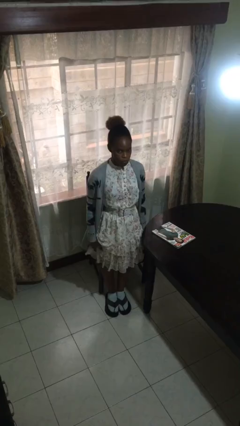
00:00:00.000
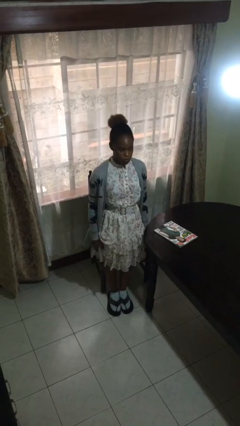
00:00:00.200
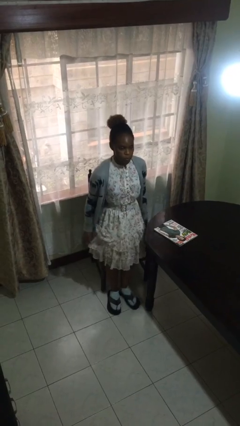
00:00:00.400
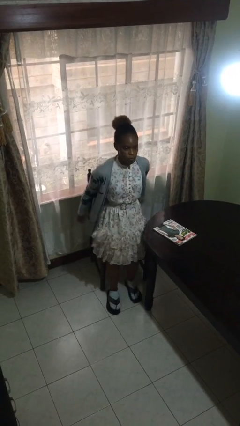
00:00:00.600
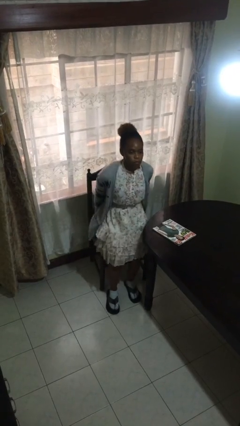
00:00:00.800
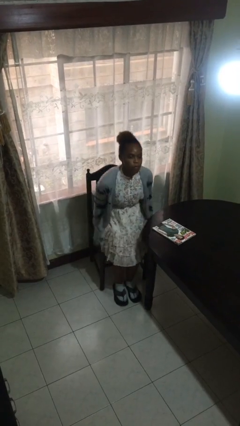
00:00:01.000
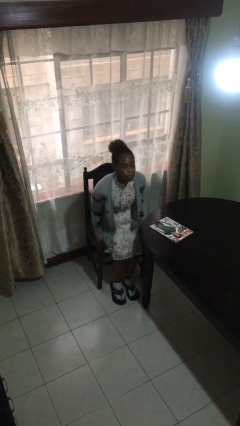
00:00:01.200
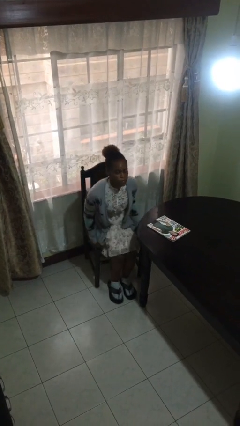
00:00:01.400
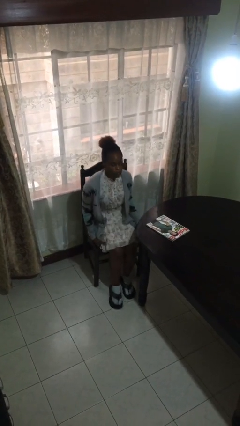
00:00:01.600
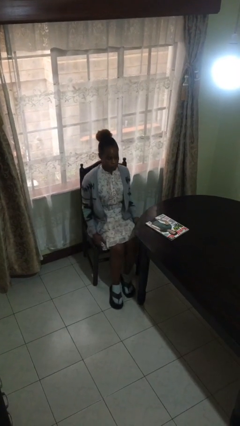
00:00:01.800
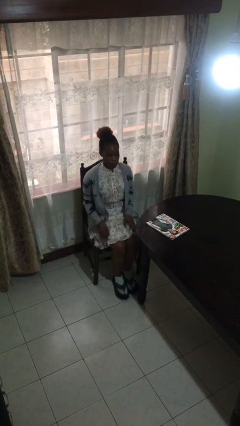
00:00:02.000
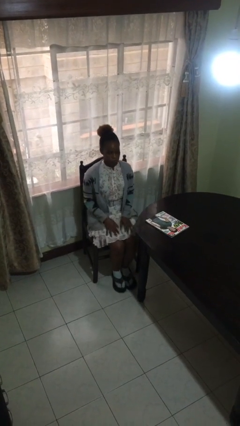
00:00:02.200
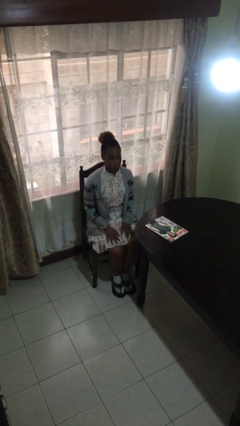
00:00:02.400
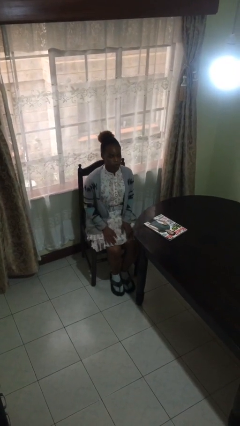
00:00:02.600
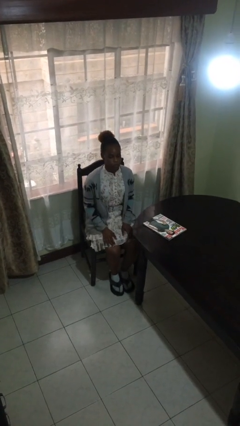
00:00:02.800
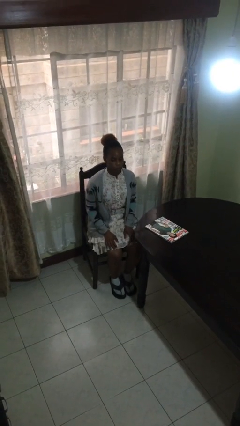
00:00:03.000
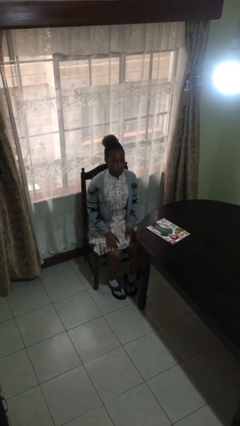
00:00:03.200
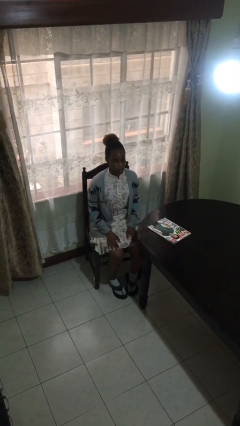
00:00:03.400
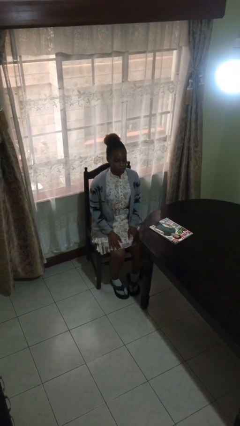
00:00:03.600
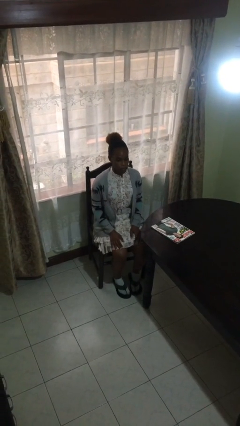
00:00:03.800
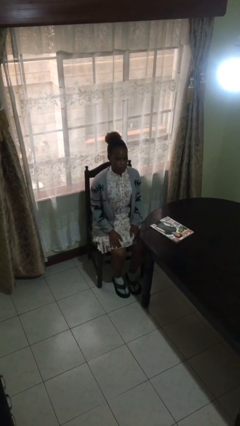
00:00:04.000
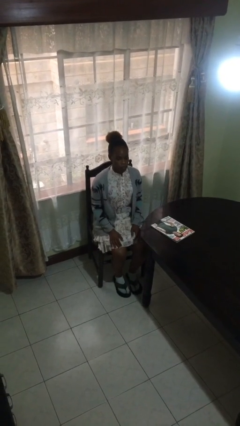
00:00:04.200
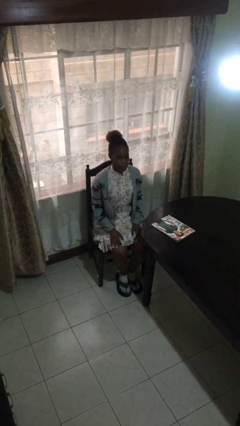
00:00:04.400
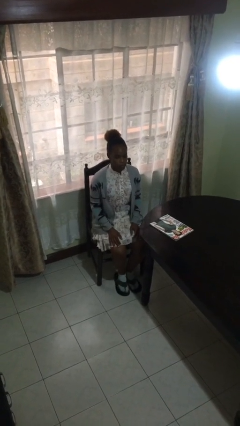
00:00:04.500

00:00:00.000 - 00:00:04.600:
person sits down

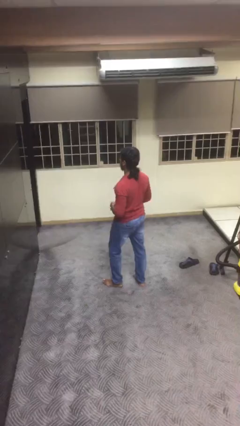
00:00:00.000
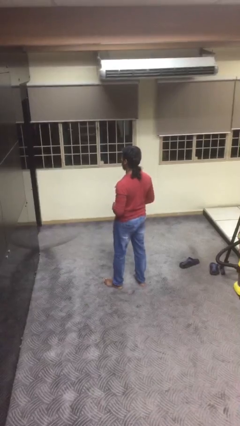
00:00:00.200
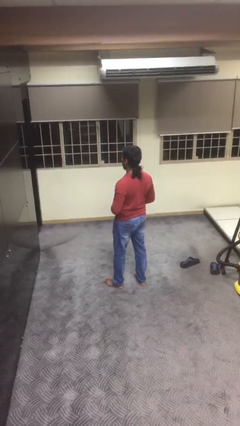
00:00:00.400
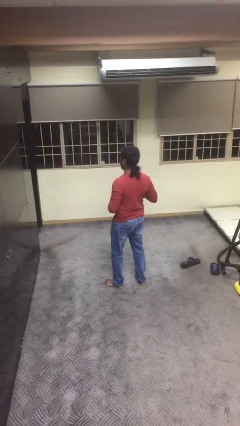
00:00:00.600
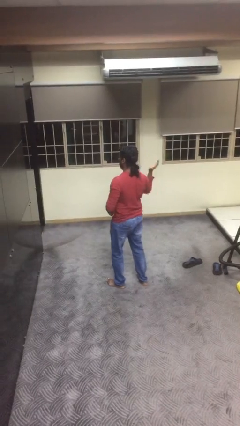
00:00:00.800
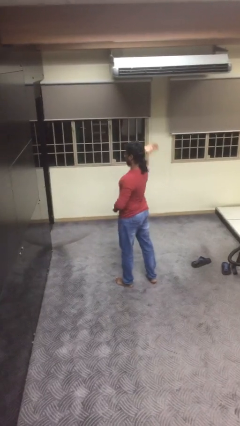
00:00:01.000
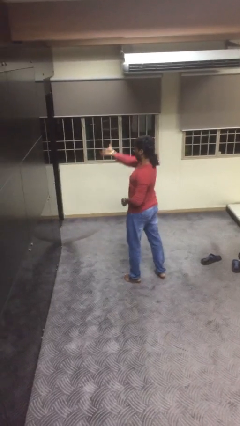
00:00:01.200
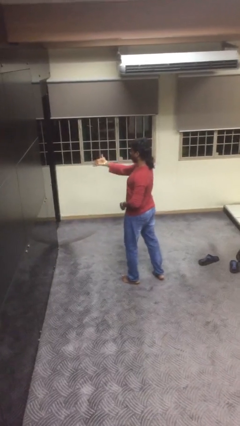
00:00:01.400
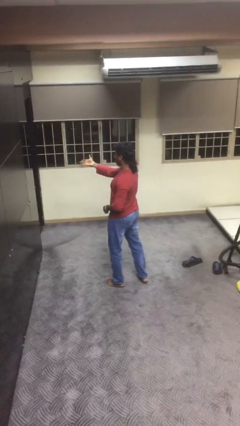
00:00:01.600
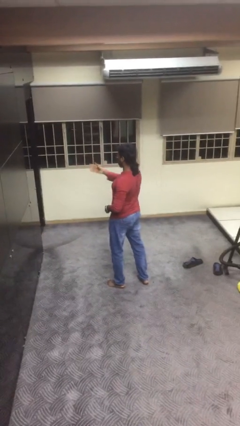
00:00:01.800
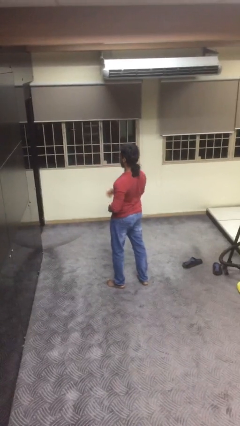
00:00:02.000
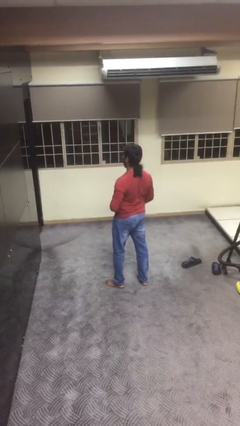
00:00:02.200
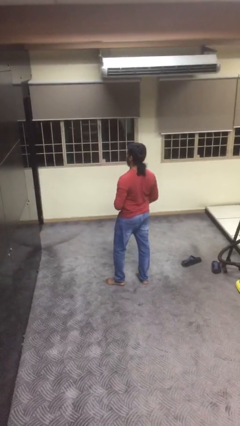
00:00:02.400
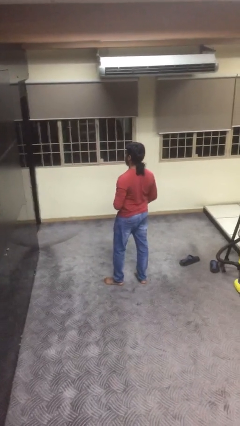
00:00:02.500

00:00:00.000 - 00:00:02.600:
person karate chop

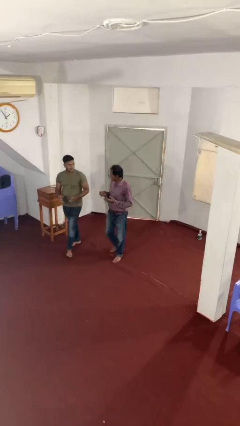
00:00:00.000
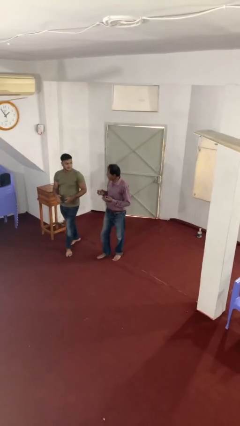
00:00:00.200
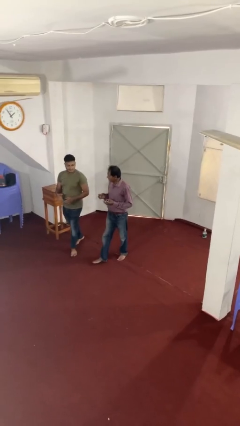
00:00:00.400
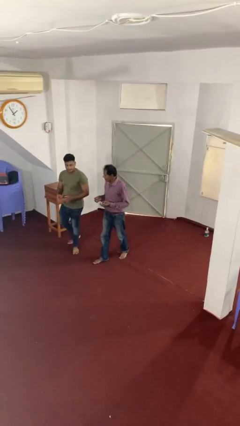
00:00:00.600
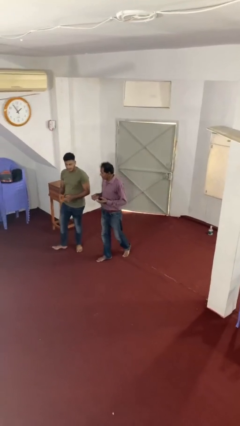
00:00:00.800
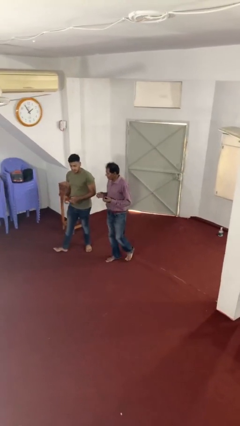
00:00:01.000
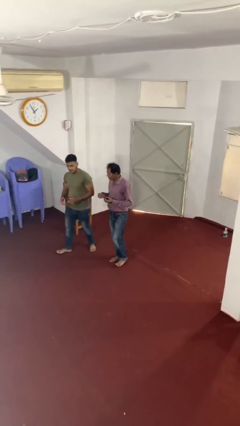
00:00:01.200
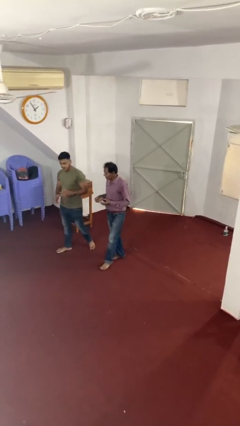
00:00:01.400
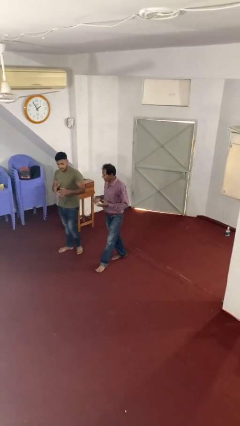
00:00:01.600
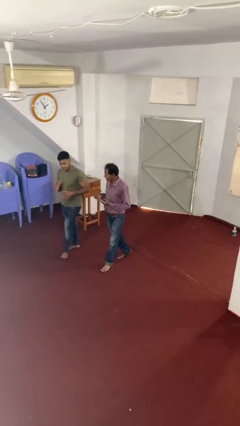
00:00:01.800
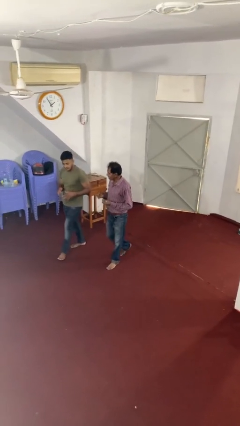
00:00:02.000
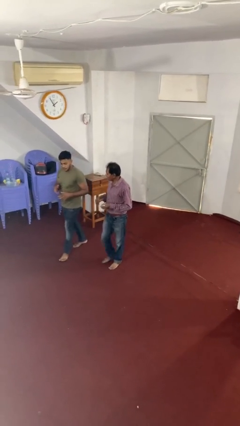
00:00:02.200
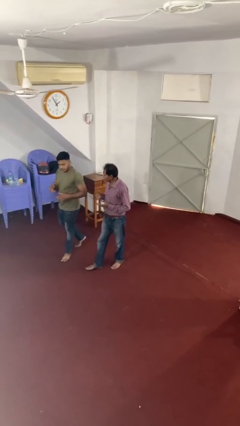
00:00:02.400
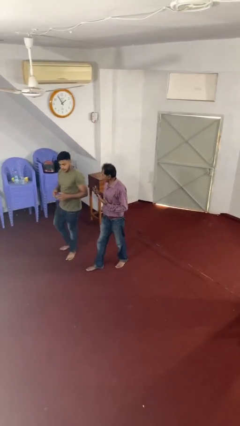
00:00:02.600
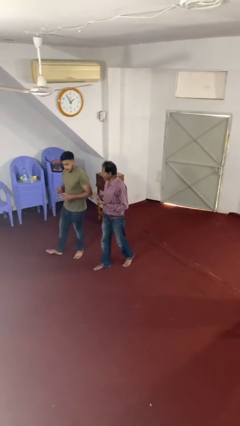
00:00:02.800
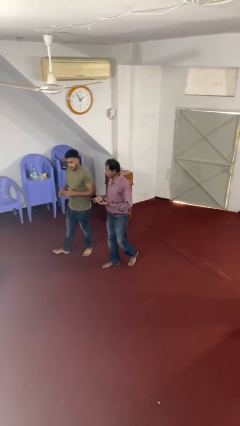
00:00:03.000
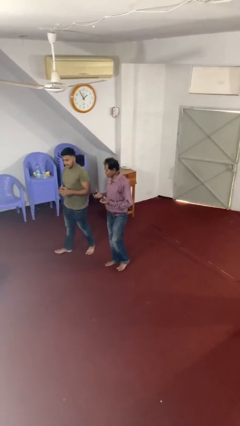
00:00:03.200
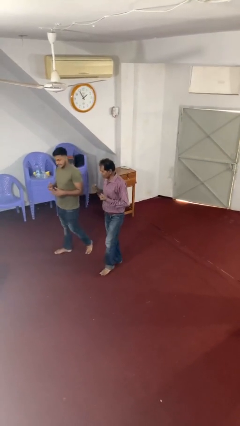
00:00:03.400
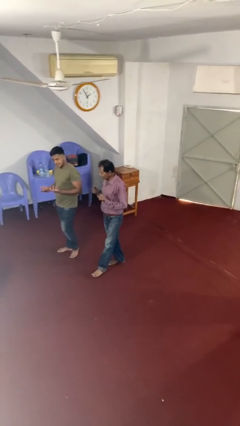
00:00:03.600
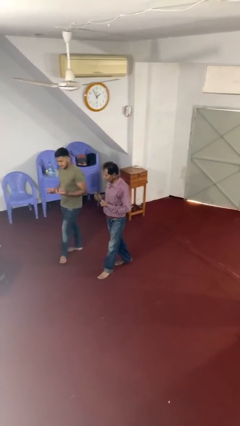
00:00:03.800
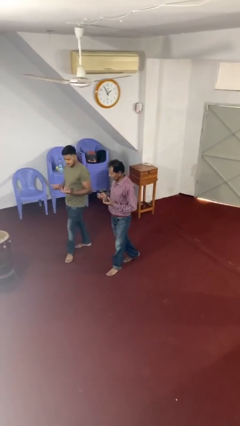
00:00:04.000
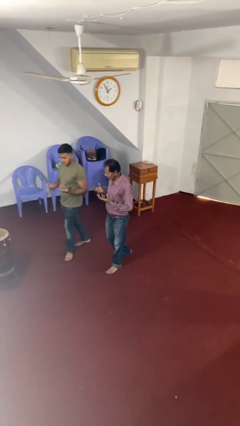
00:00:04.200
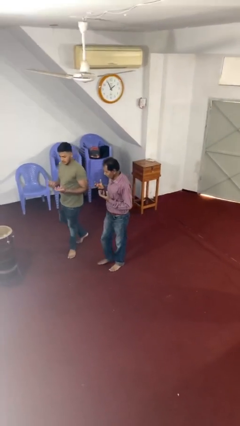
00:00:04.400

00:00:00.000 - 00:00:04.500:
person talks to person

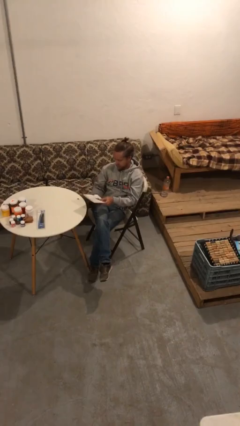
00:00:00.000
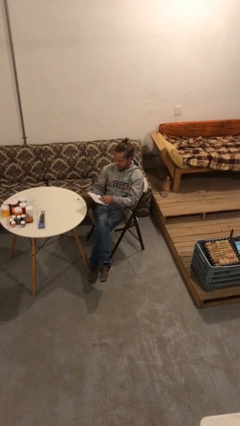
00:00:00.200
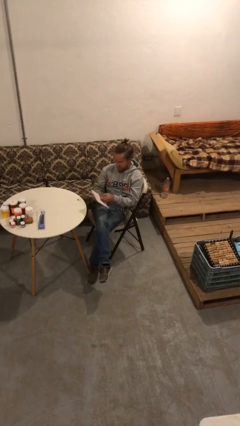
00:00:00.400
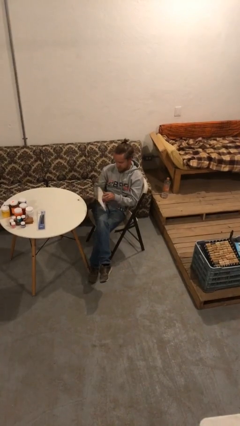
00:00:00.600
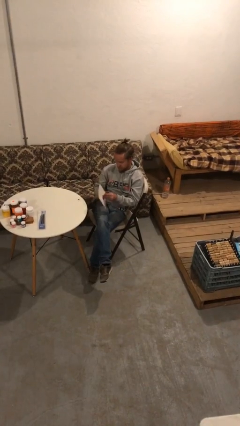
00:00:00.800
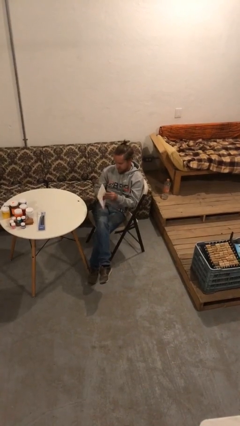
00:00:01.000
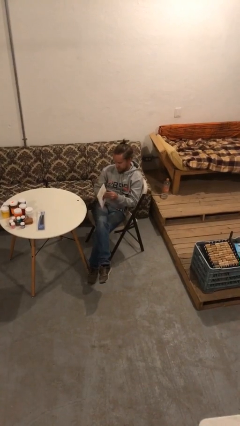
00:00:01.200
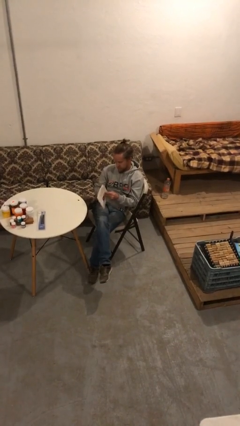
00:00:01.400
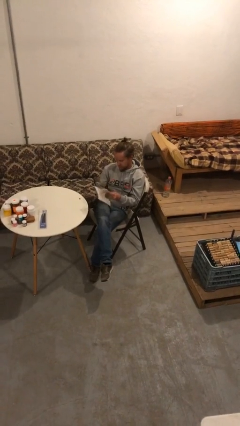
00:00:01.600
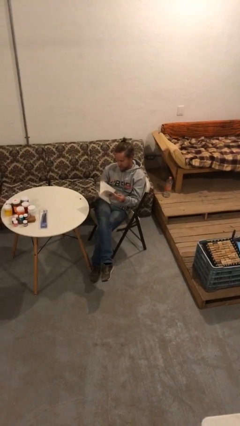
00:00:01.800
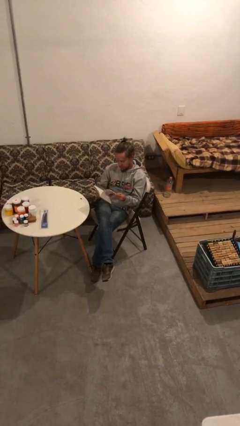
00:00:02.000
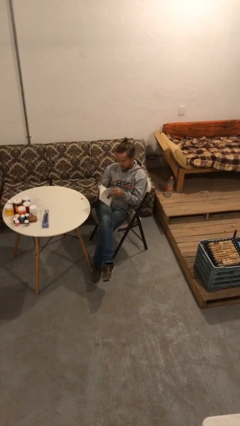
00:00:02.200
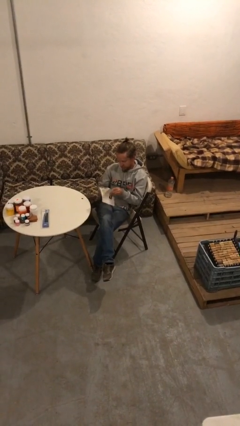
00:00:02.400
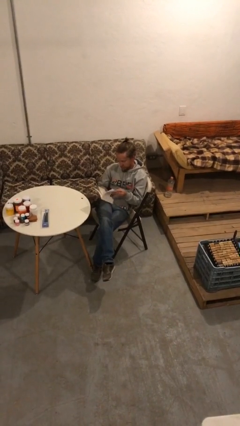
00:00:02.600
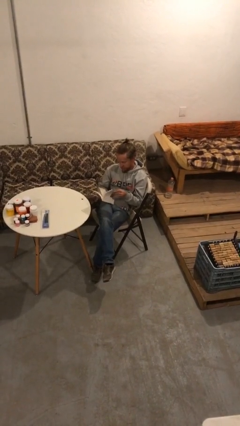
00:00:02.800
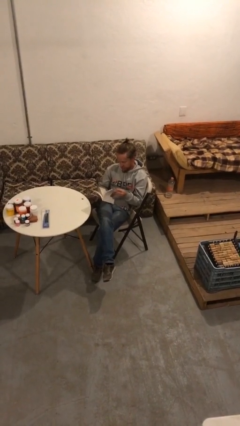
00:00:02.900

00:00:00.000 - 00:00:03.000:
person reads document

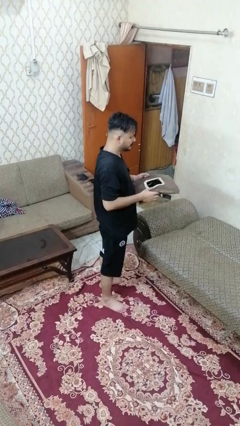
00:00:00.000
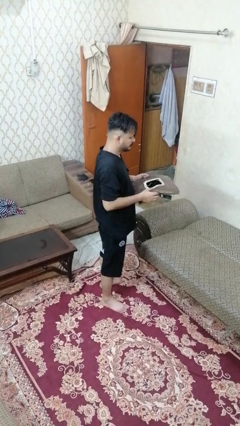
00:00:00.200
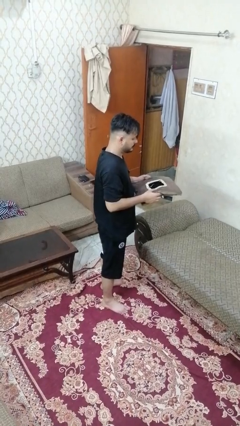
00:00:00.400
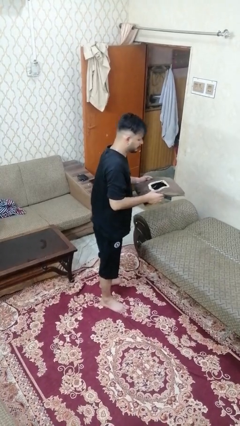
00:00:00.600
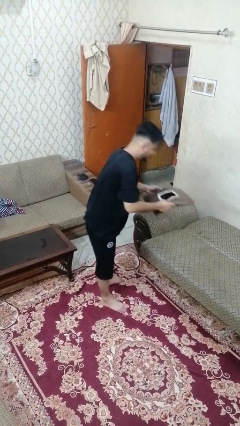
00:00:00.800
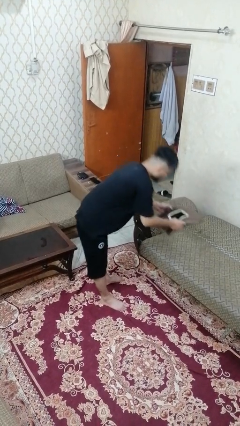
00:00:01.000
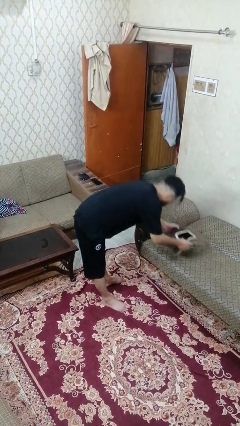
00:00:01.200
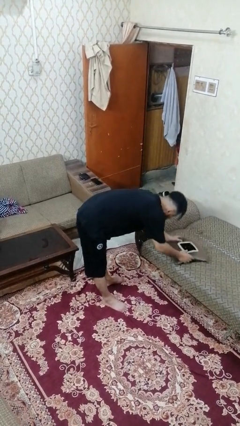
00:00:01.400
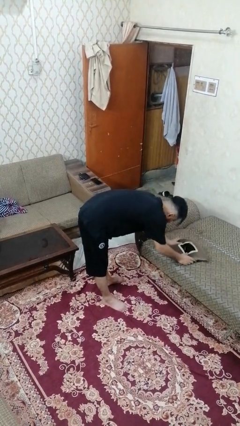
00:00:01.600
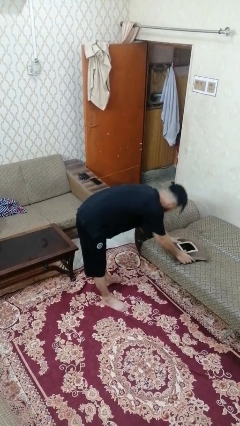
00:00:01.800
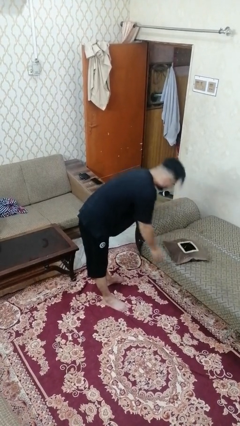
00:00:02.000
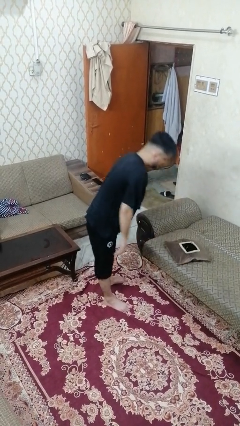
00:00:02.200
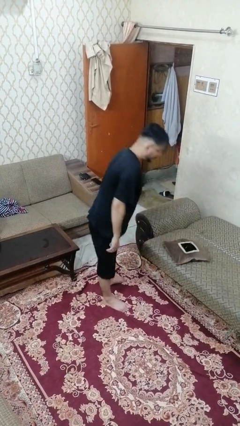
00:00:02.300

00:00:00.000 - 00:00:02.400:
person puts down object on couch

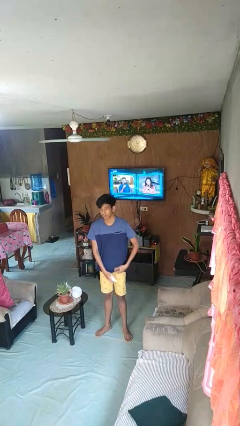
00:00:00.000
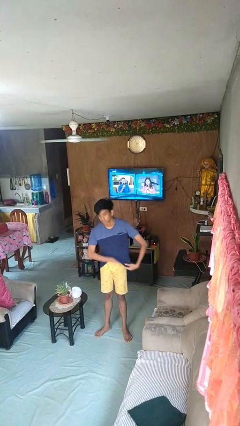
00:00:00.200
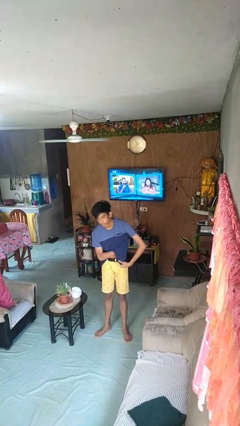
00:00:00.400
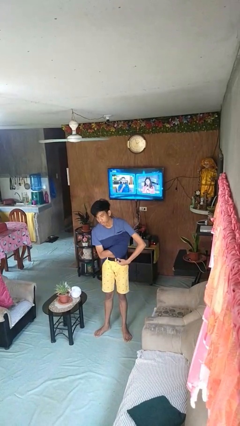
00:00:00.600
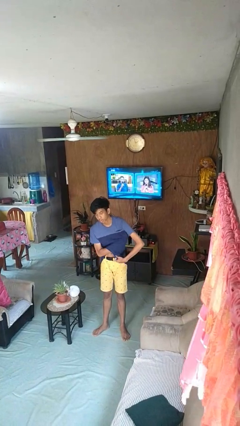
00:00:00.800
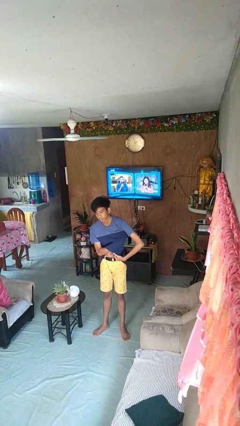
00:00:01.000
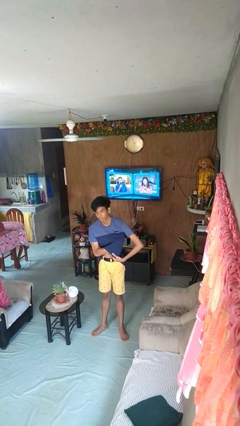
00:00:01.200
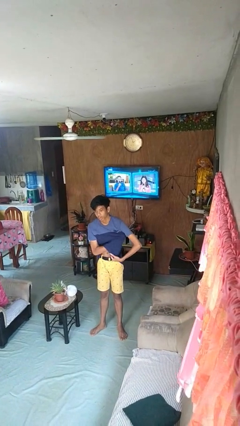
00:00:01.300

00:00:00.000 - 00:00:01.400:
person applies deodorant
